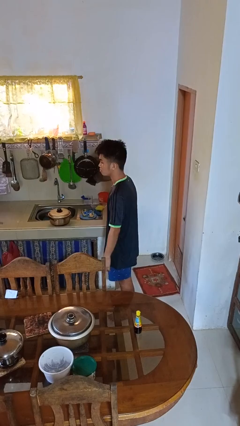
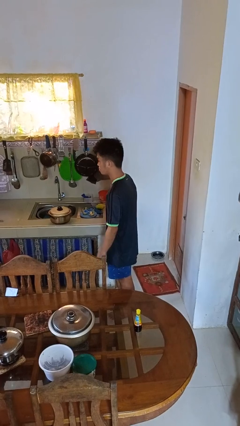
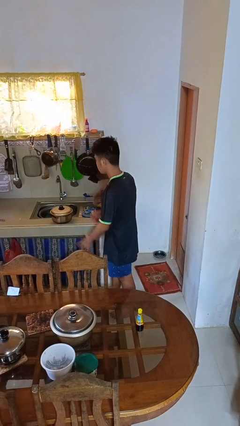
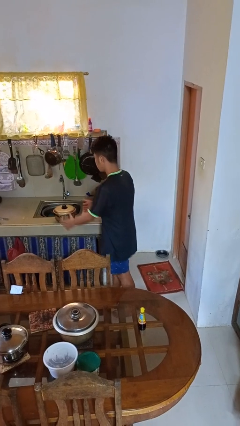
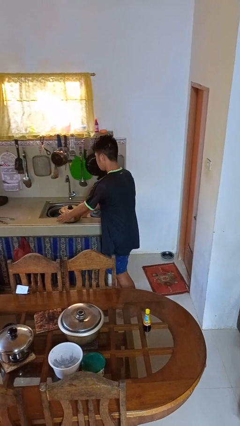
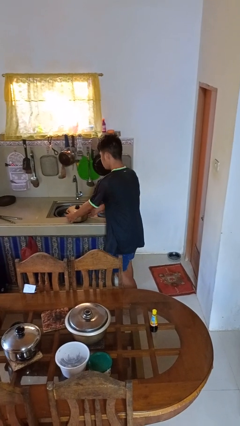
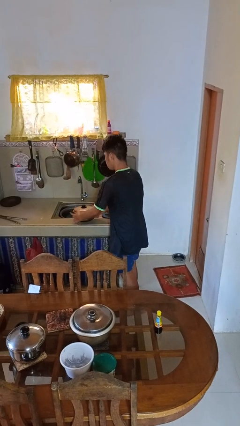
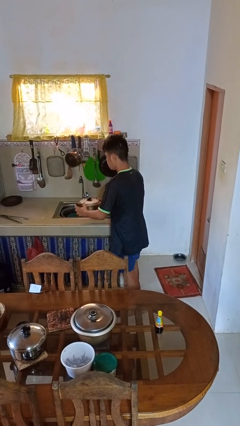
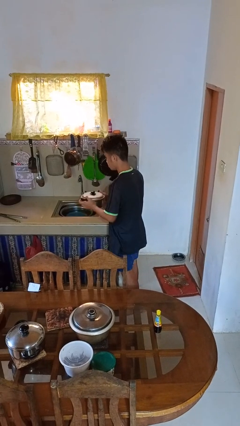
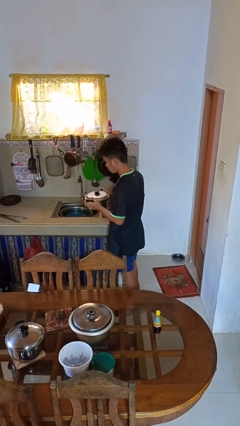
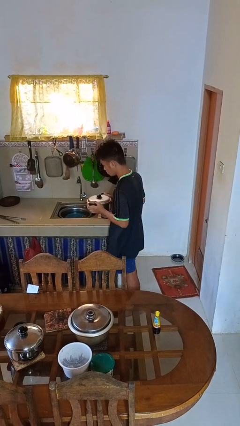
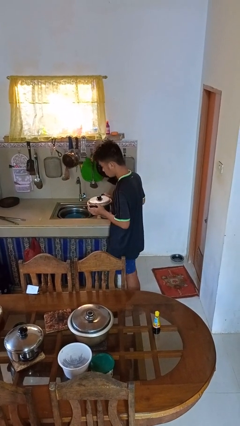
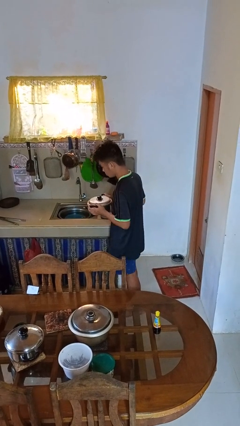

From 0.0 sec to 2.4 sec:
person picks up object from countertop

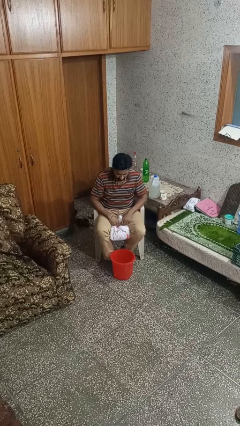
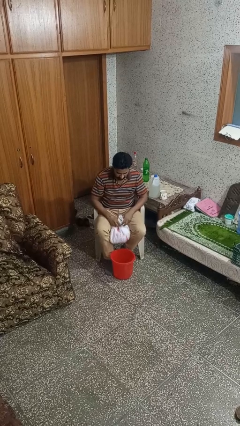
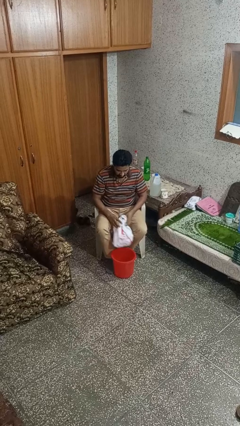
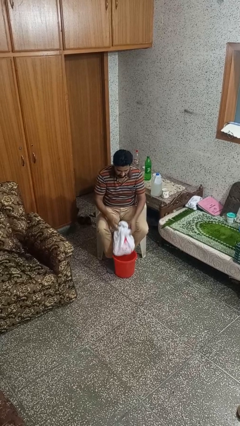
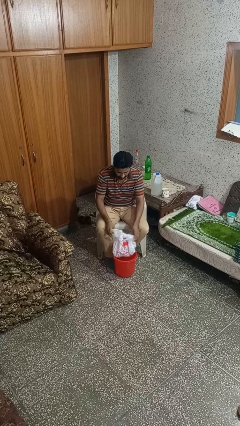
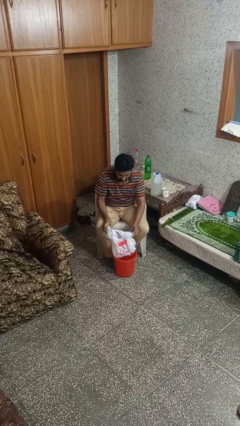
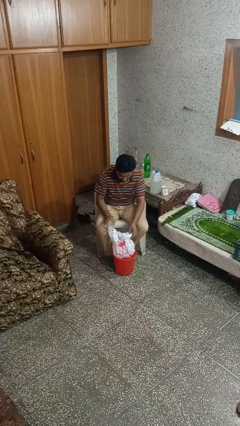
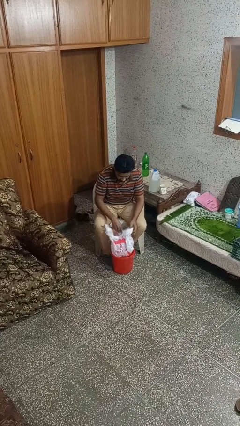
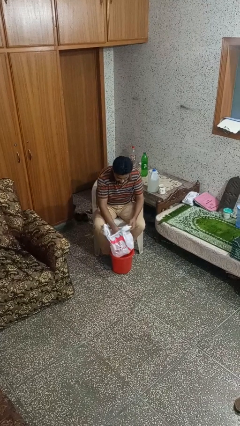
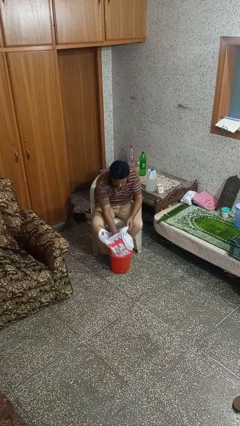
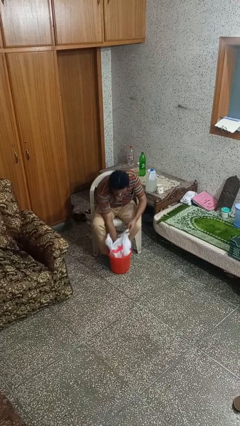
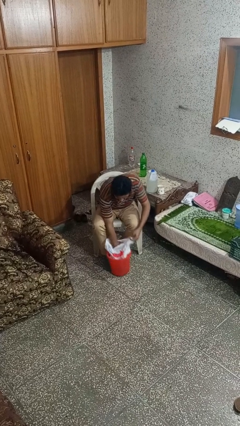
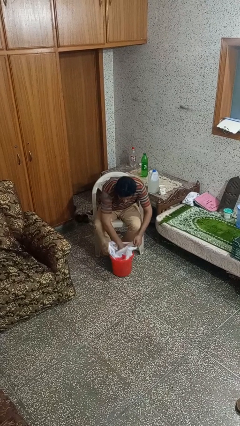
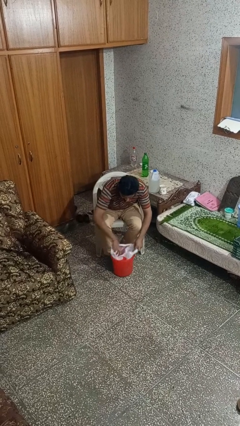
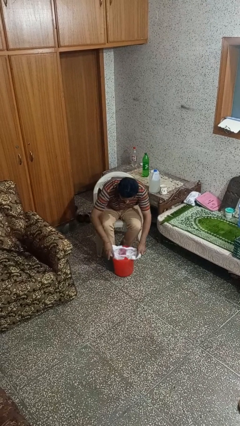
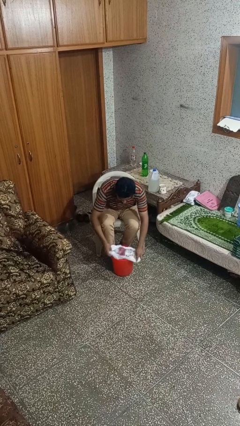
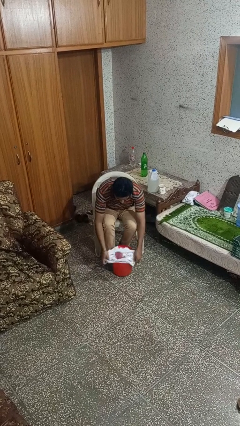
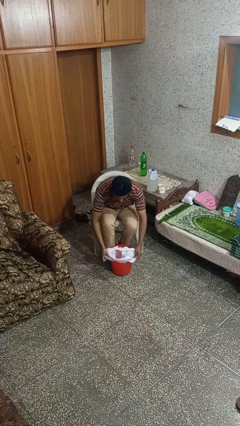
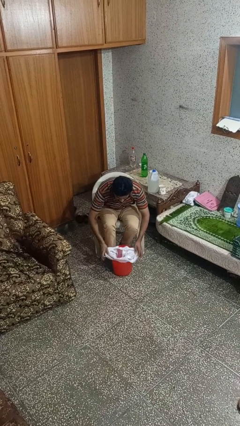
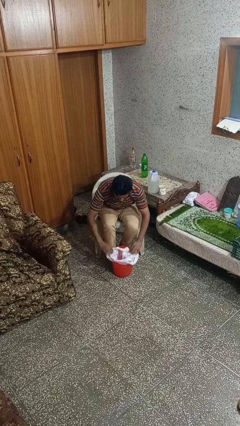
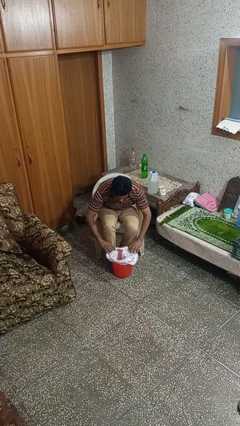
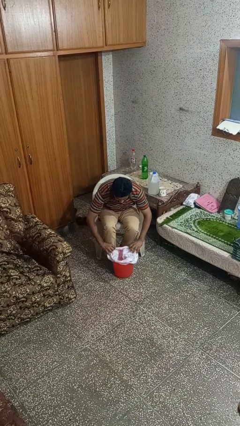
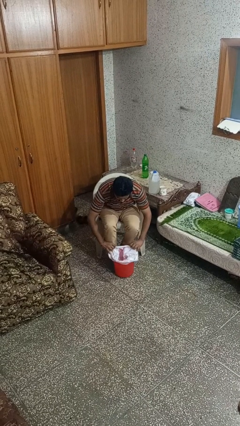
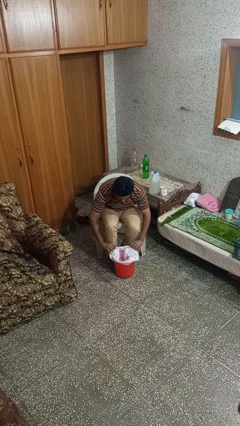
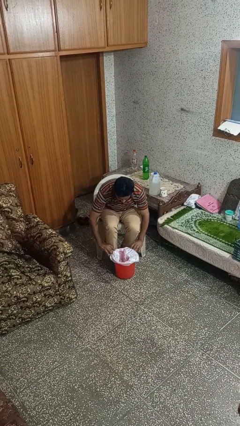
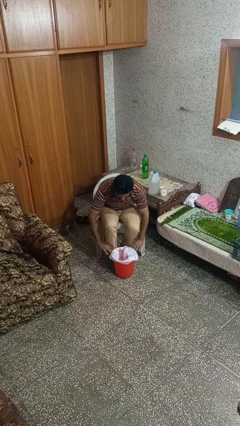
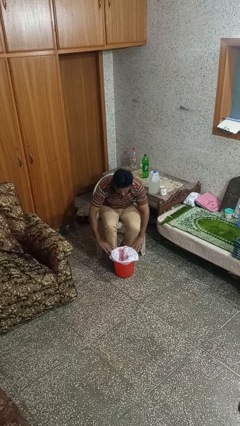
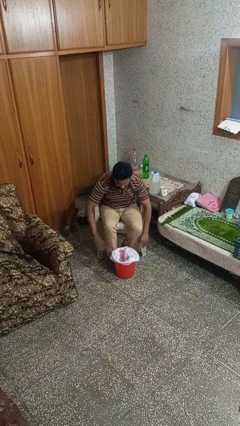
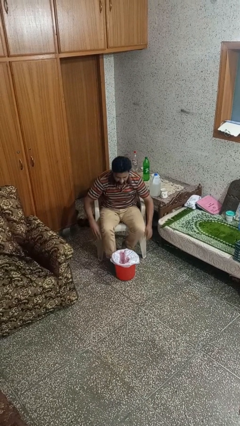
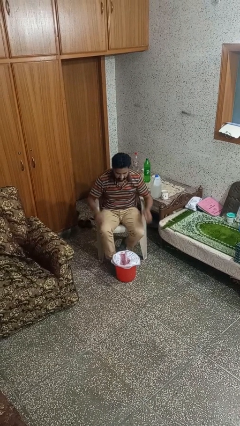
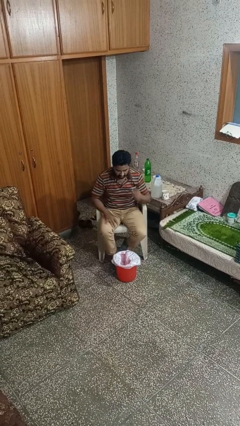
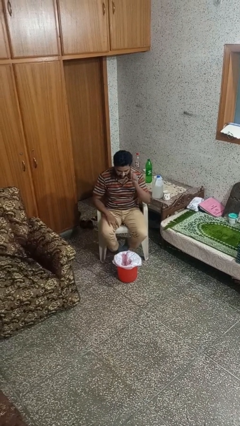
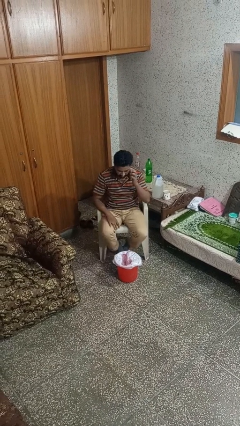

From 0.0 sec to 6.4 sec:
person inserts trashbag into trashcan

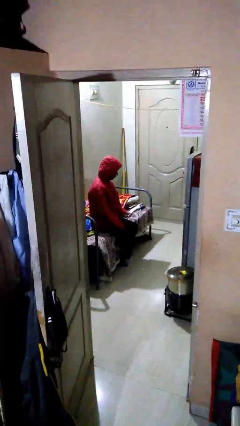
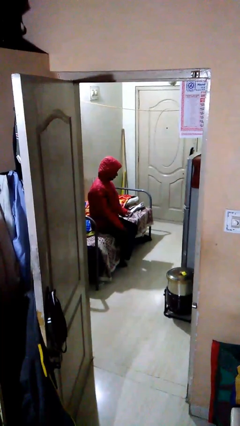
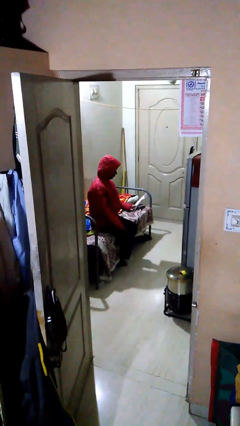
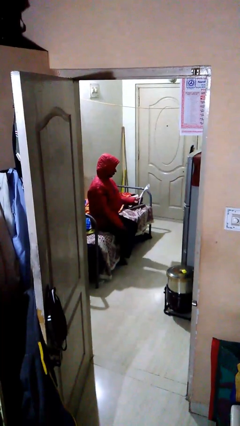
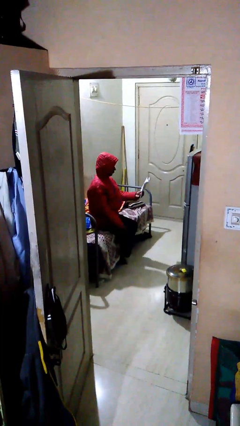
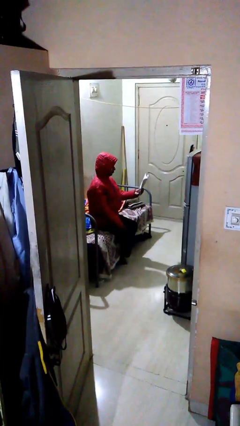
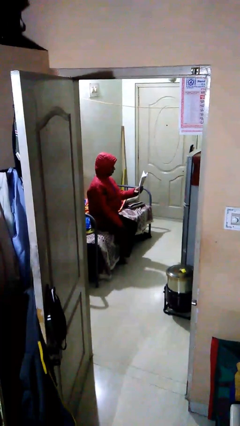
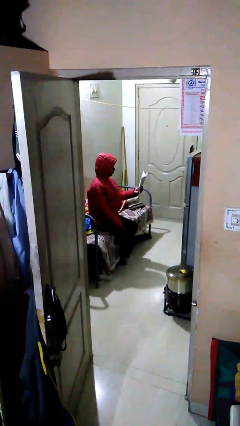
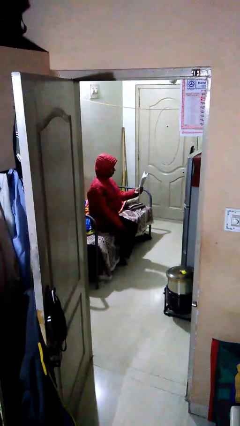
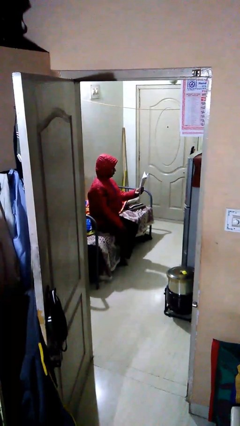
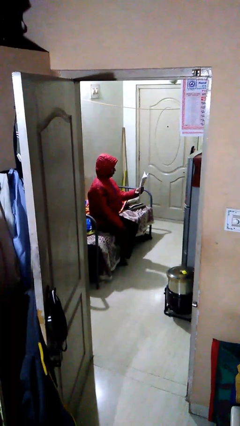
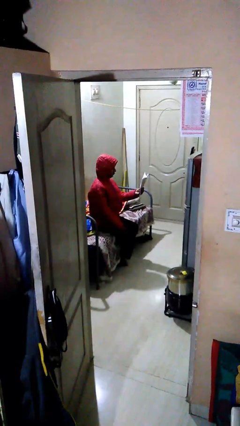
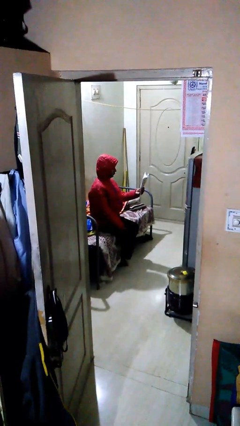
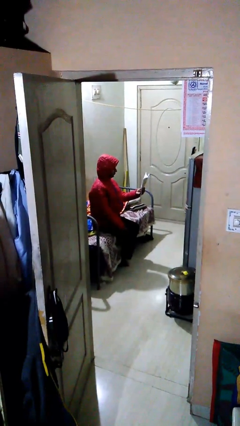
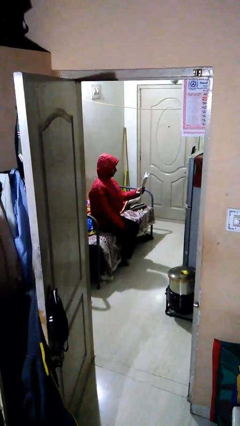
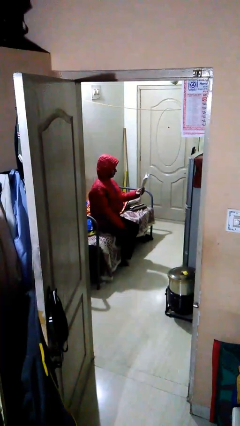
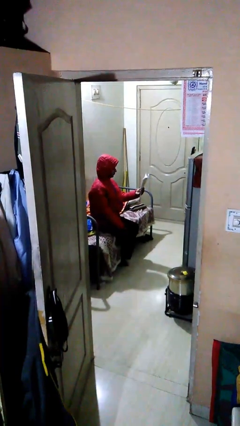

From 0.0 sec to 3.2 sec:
person reads document

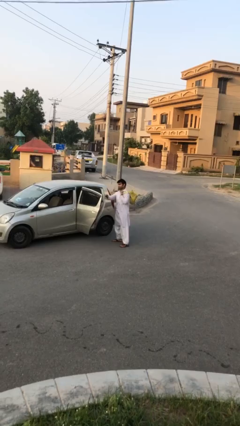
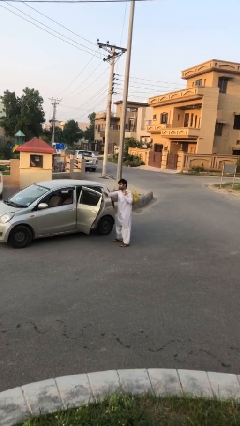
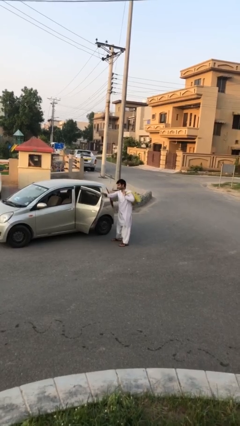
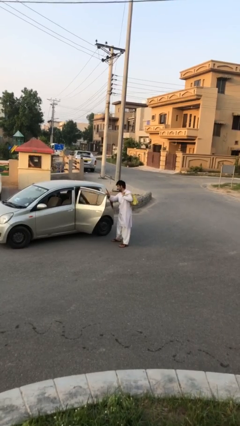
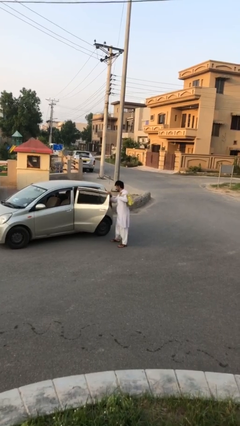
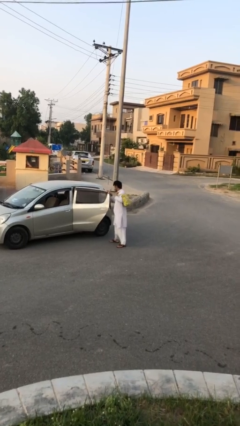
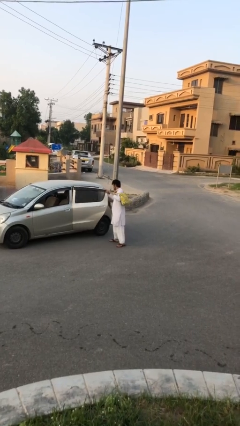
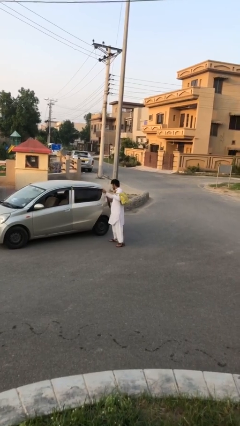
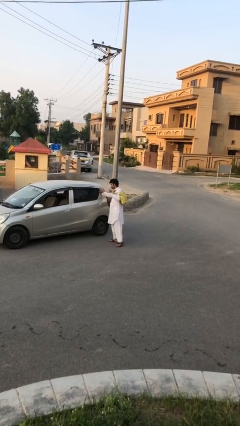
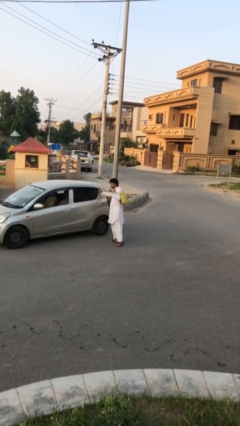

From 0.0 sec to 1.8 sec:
person closes car door

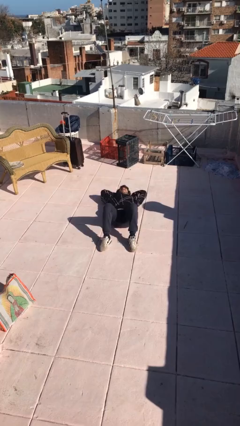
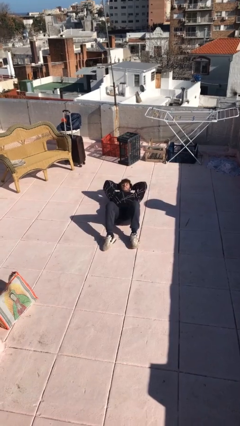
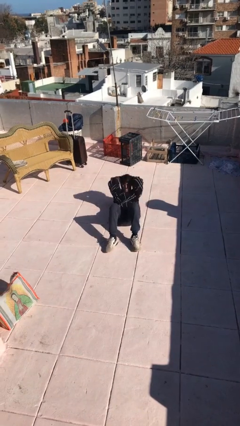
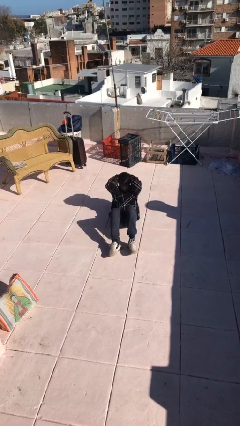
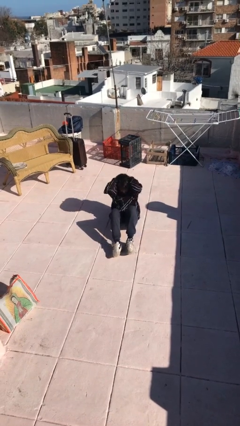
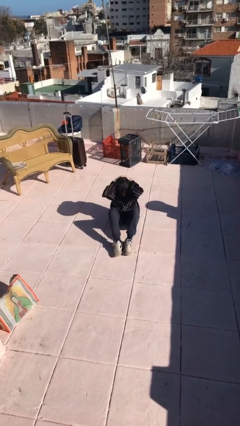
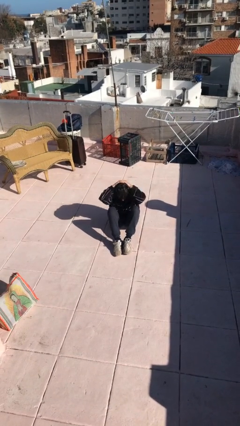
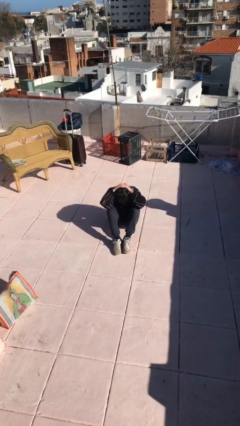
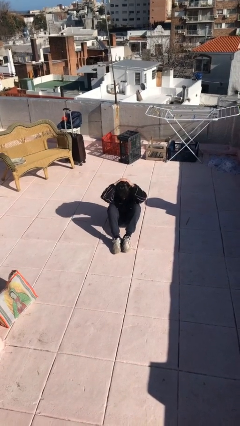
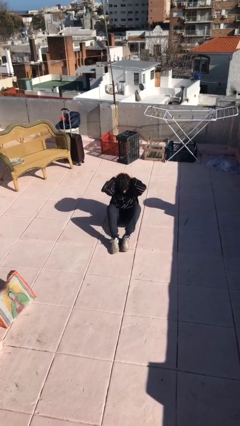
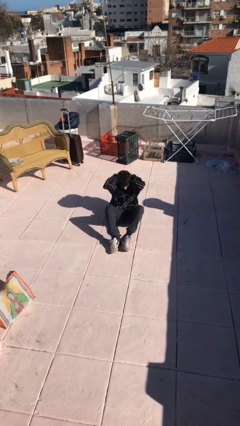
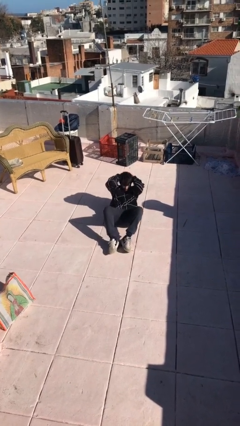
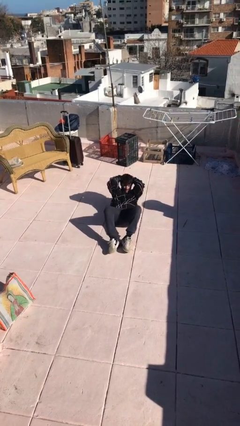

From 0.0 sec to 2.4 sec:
person exercises with situp

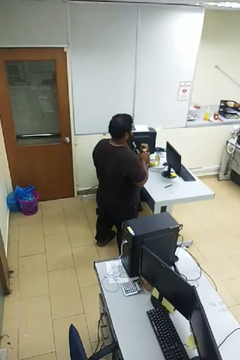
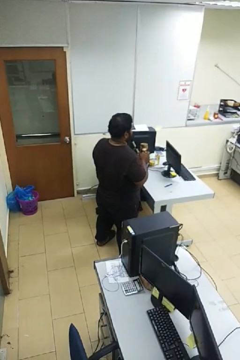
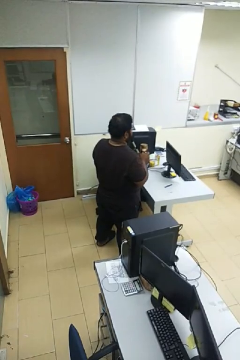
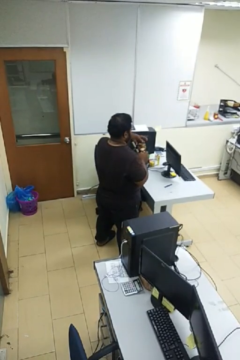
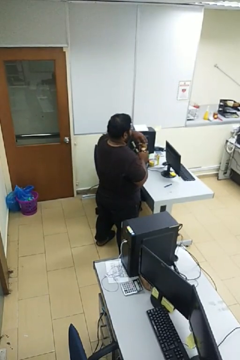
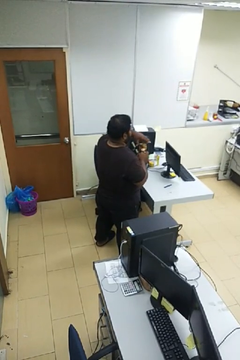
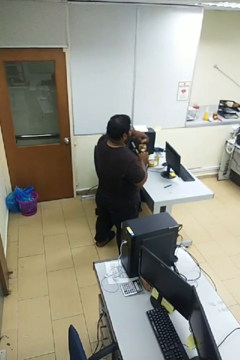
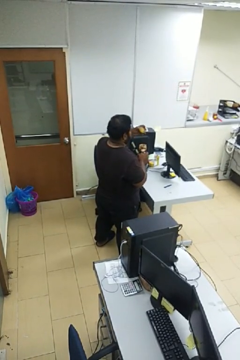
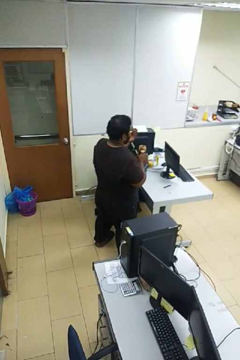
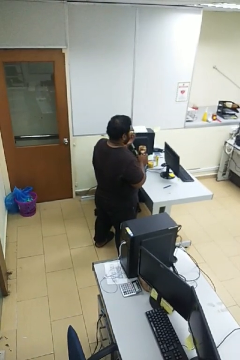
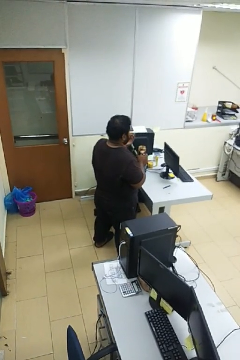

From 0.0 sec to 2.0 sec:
person opens jar
